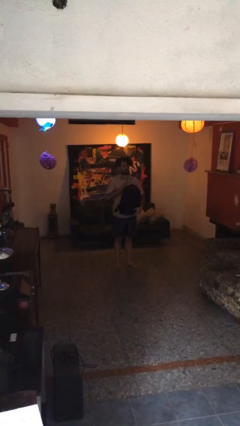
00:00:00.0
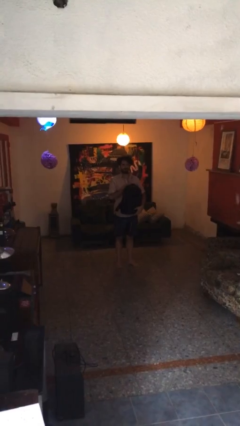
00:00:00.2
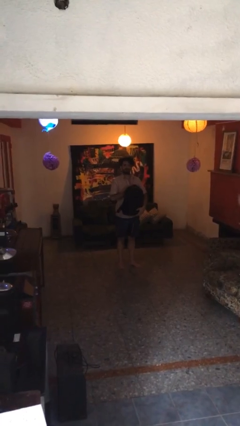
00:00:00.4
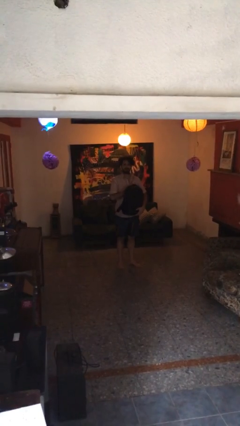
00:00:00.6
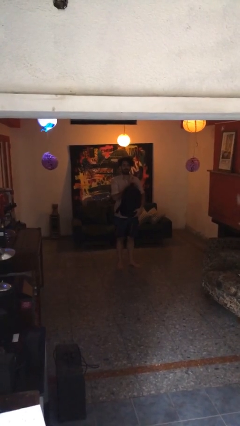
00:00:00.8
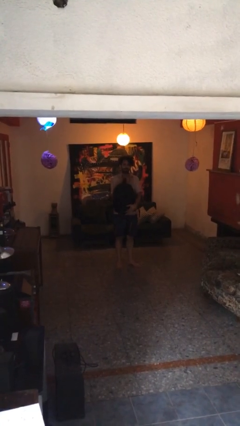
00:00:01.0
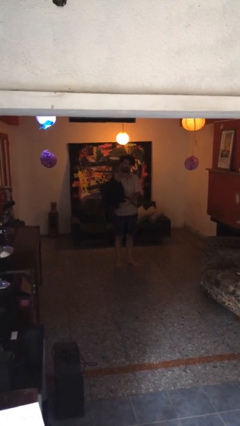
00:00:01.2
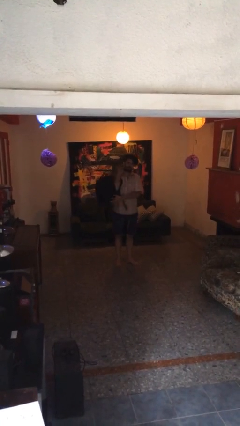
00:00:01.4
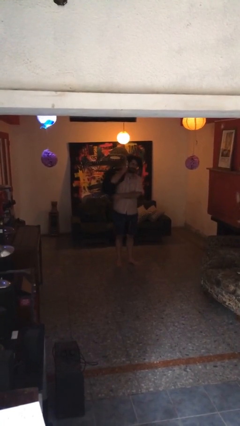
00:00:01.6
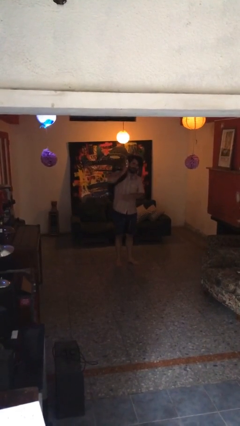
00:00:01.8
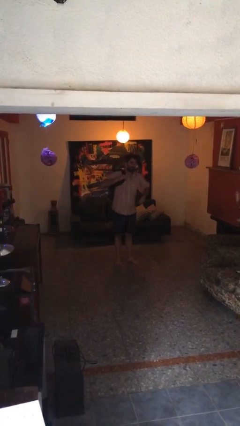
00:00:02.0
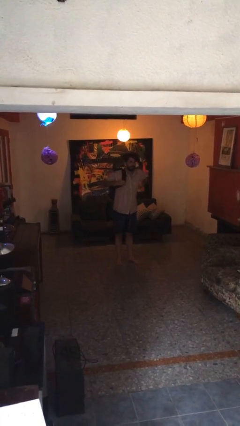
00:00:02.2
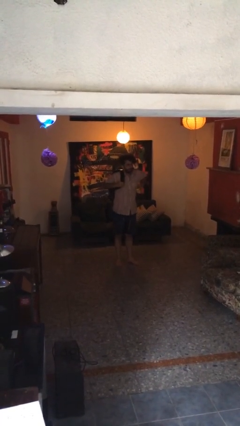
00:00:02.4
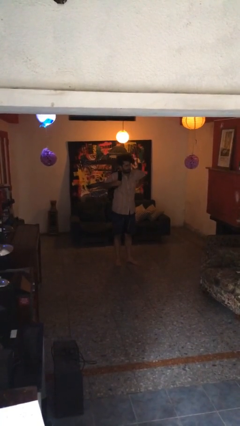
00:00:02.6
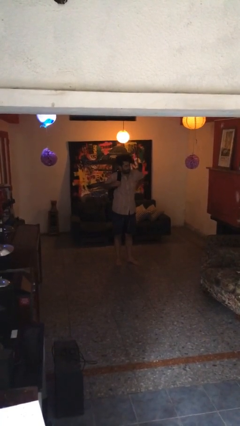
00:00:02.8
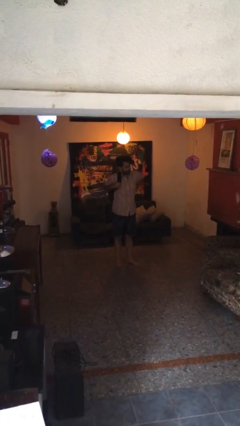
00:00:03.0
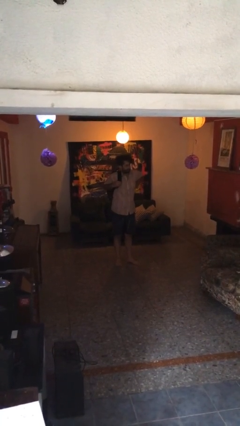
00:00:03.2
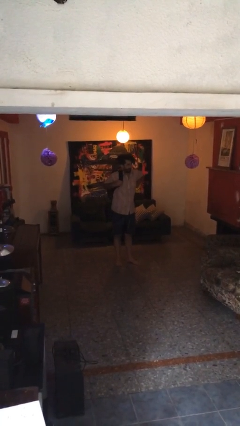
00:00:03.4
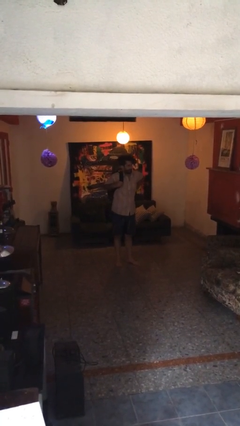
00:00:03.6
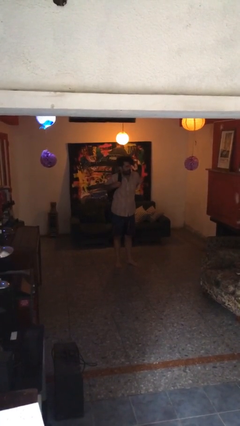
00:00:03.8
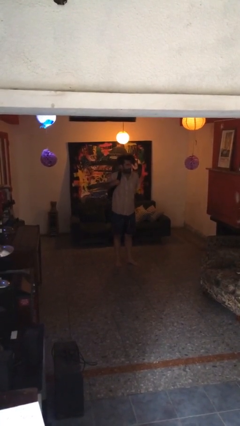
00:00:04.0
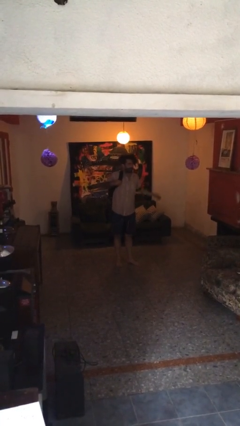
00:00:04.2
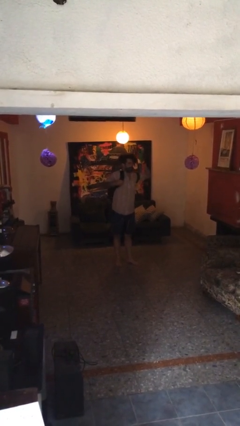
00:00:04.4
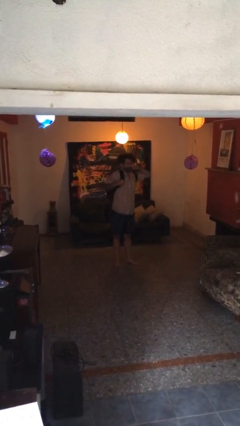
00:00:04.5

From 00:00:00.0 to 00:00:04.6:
person puts on backpack

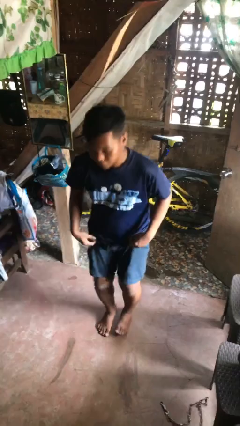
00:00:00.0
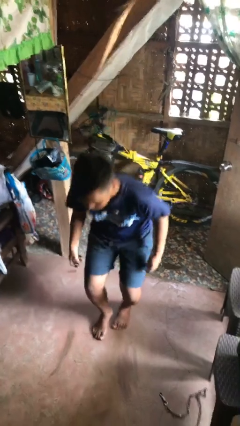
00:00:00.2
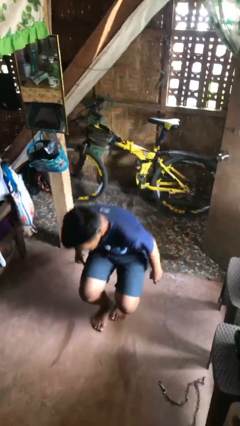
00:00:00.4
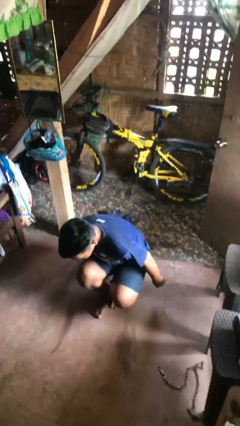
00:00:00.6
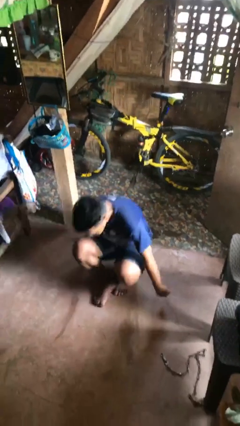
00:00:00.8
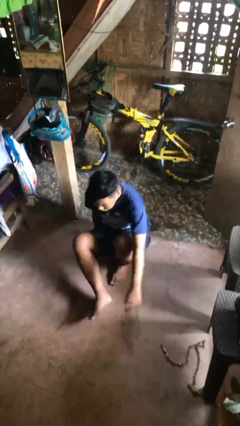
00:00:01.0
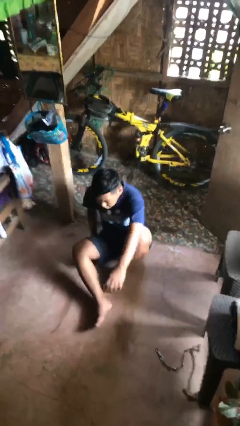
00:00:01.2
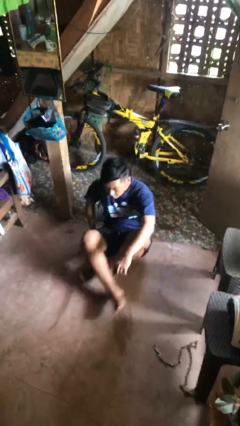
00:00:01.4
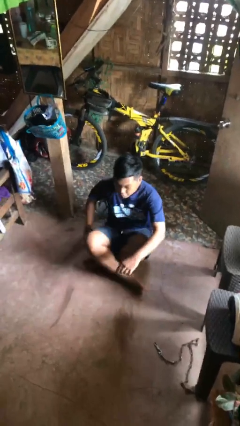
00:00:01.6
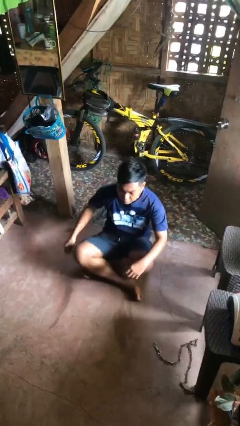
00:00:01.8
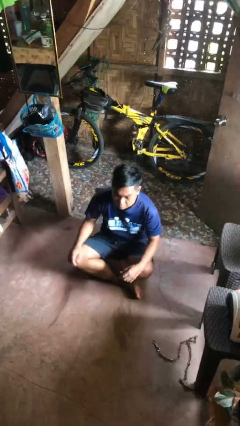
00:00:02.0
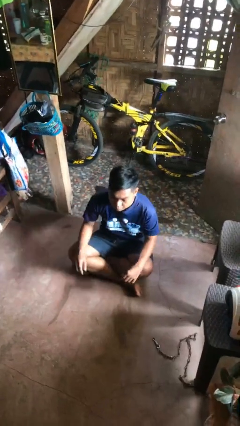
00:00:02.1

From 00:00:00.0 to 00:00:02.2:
person sits crisscross

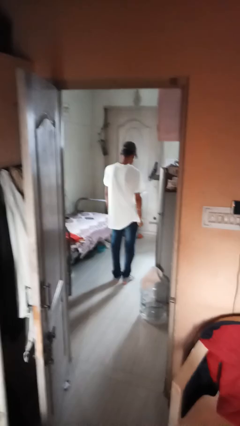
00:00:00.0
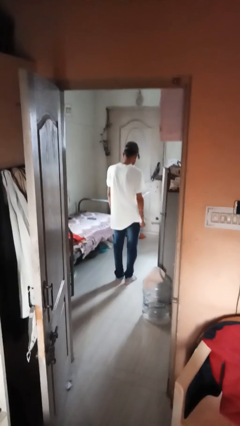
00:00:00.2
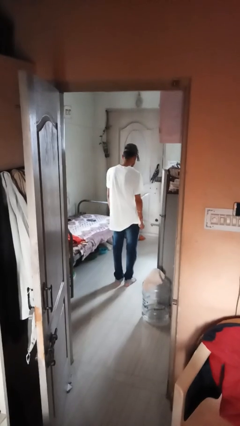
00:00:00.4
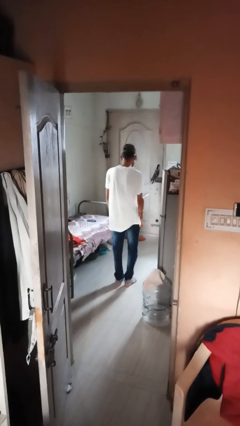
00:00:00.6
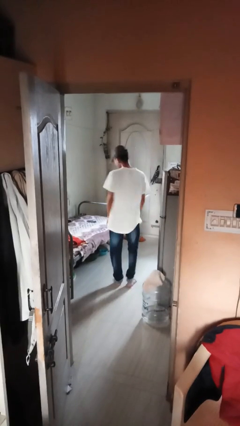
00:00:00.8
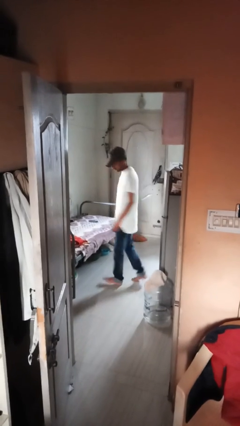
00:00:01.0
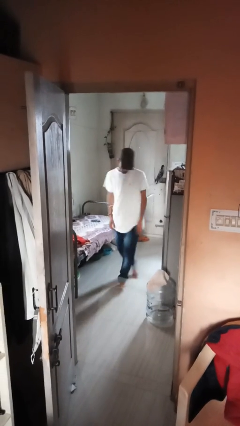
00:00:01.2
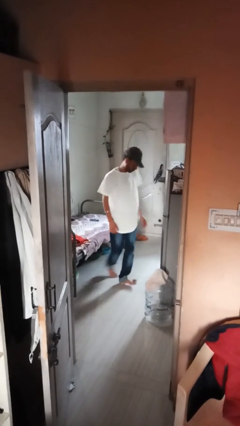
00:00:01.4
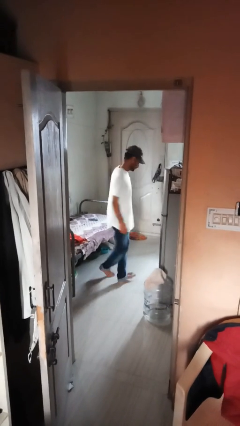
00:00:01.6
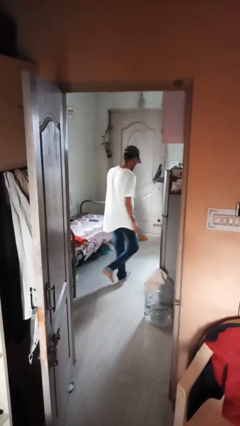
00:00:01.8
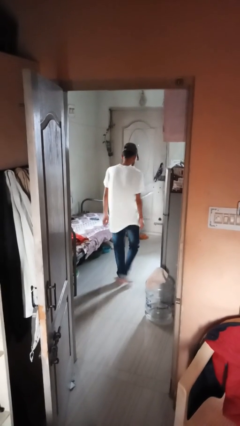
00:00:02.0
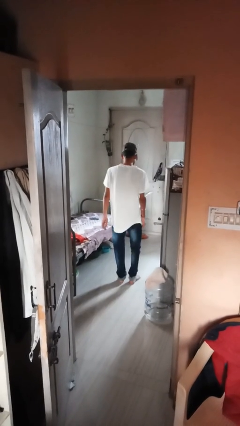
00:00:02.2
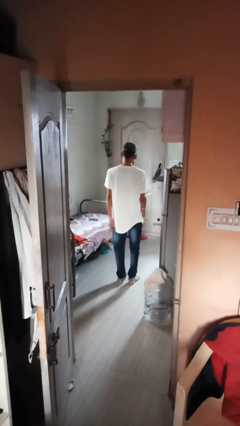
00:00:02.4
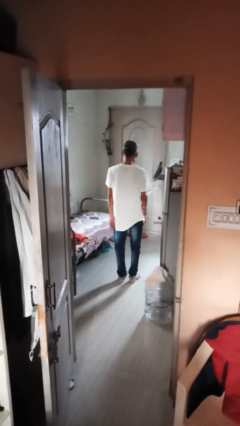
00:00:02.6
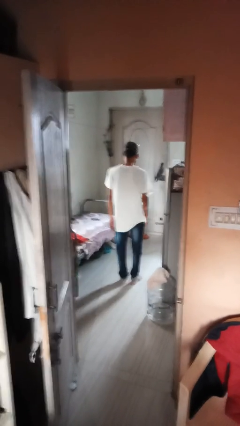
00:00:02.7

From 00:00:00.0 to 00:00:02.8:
person twirls

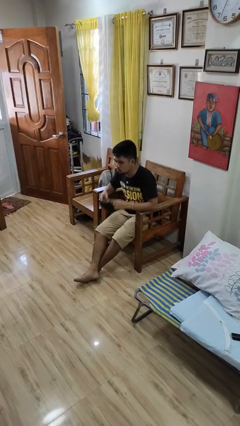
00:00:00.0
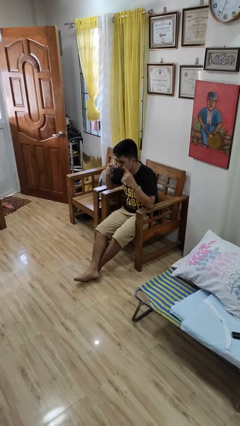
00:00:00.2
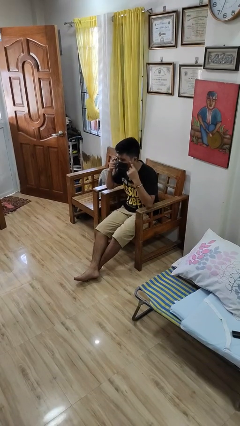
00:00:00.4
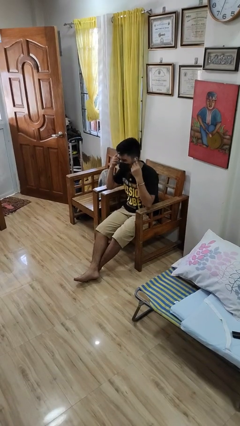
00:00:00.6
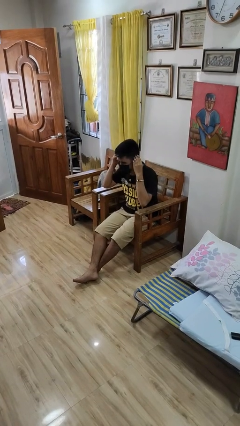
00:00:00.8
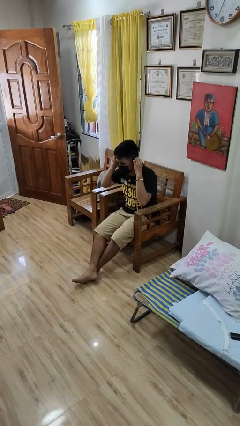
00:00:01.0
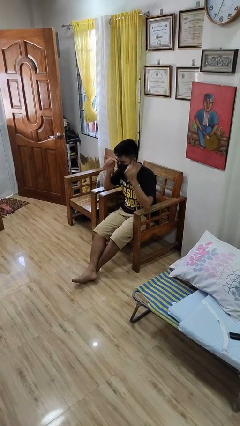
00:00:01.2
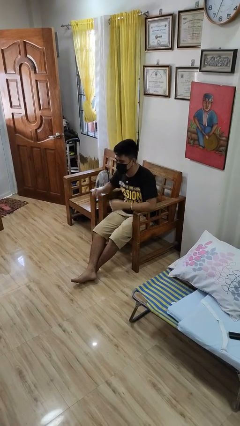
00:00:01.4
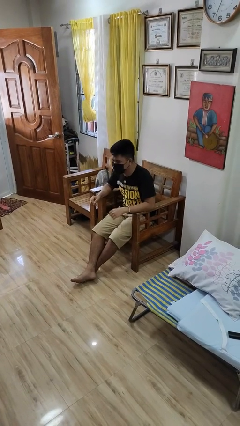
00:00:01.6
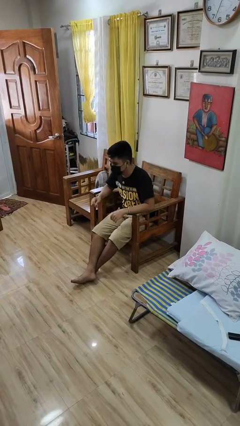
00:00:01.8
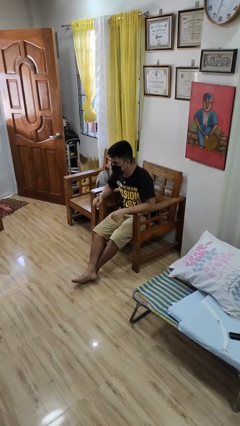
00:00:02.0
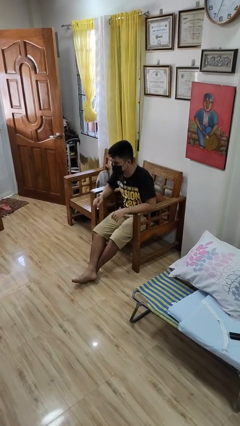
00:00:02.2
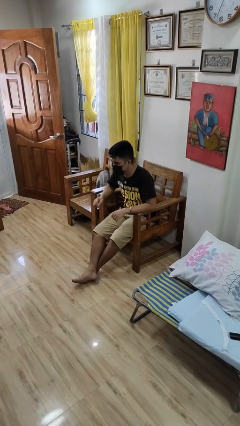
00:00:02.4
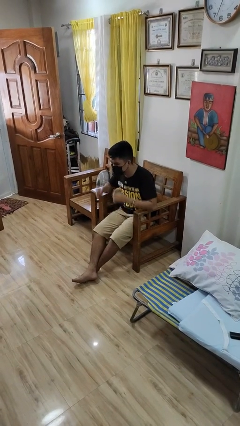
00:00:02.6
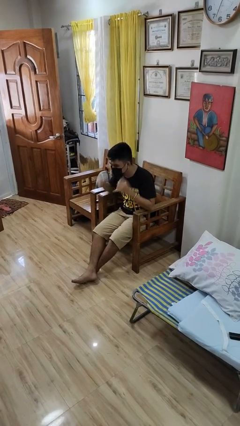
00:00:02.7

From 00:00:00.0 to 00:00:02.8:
person puts on facemask

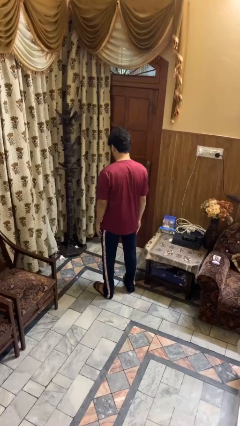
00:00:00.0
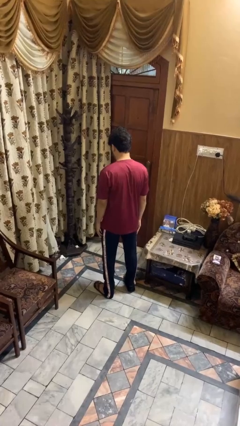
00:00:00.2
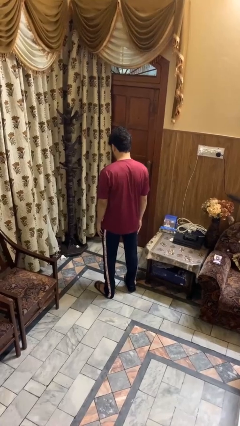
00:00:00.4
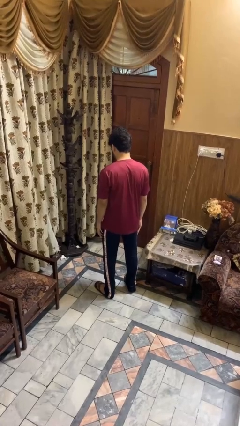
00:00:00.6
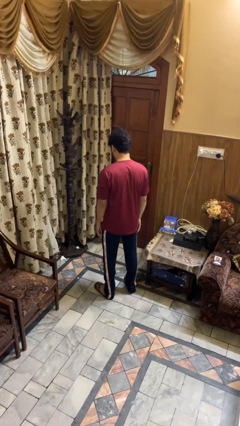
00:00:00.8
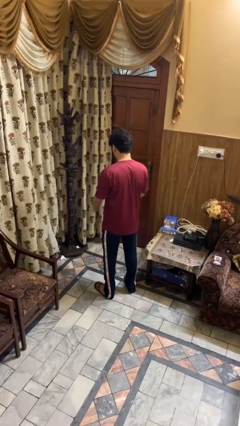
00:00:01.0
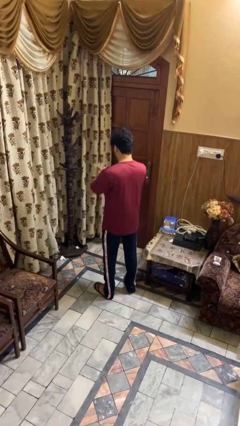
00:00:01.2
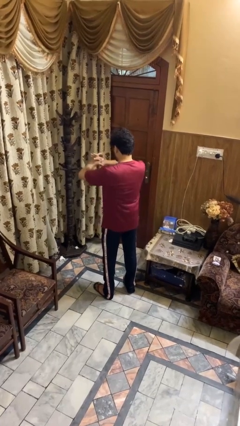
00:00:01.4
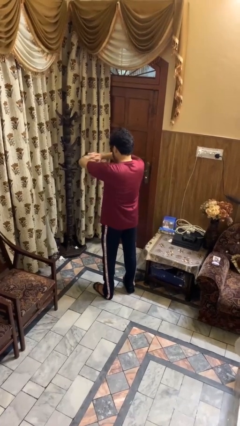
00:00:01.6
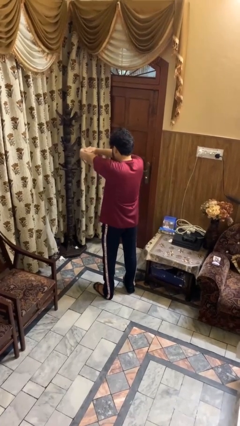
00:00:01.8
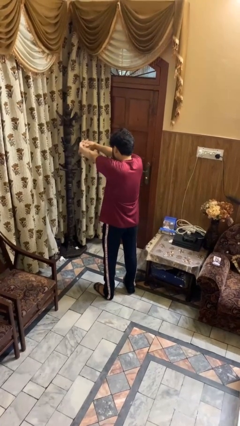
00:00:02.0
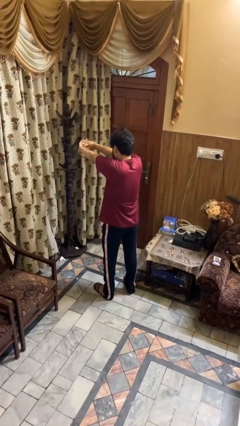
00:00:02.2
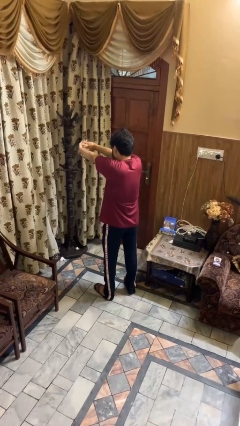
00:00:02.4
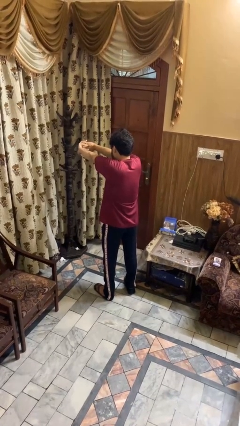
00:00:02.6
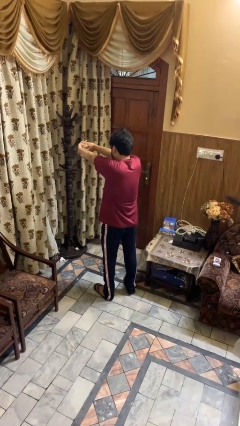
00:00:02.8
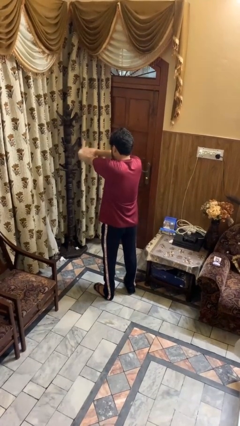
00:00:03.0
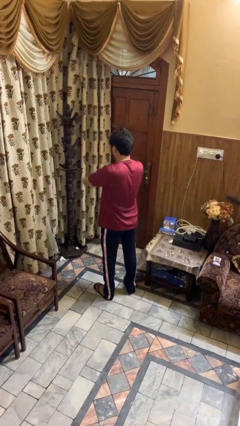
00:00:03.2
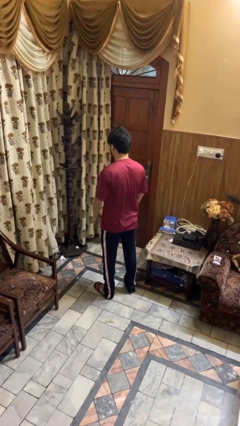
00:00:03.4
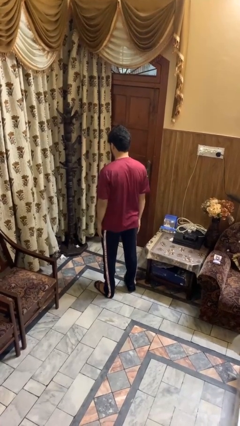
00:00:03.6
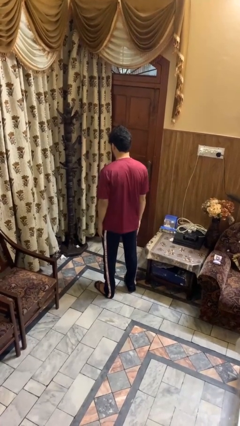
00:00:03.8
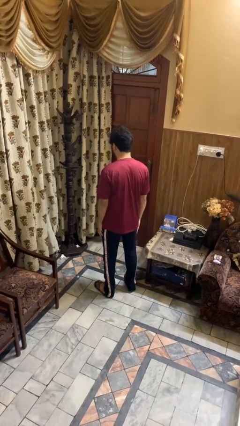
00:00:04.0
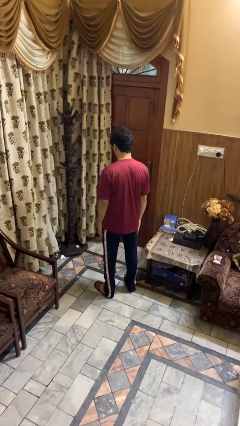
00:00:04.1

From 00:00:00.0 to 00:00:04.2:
person cracks knuckles

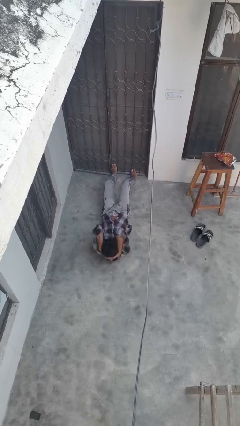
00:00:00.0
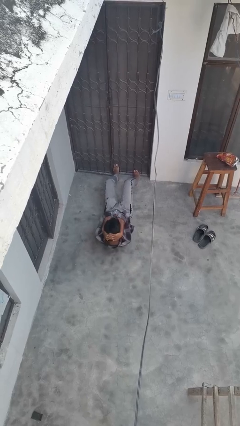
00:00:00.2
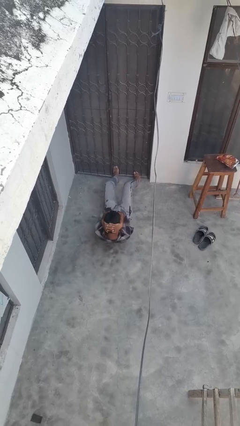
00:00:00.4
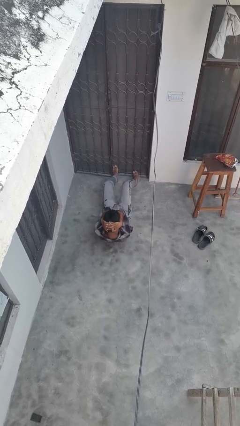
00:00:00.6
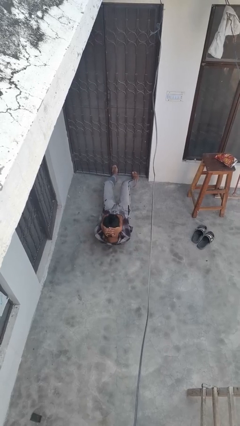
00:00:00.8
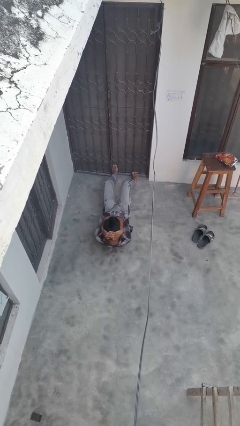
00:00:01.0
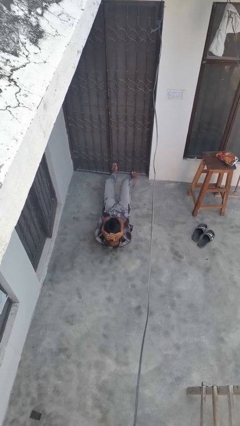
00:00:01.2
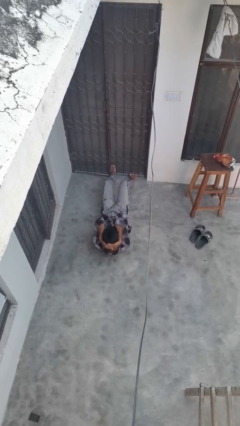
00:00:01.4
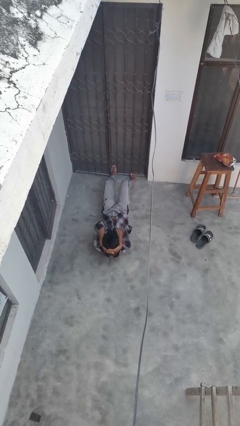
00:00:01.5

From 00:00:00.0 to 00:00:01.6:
person exercises with situp
